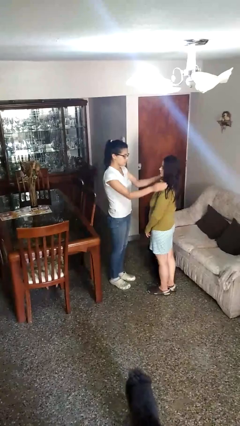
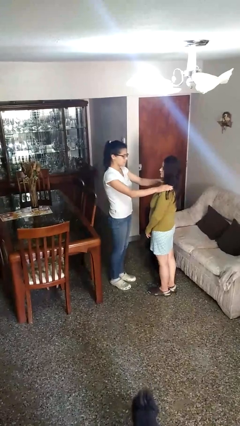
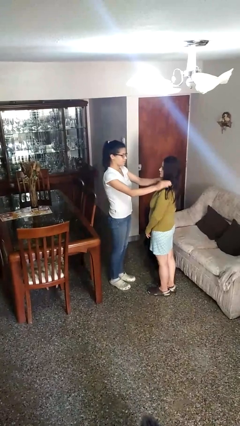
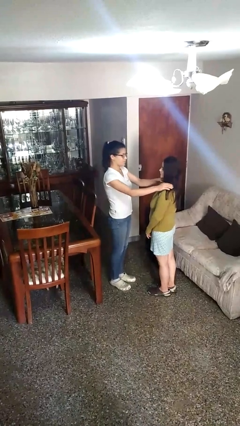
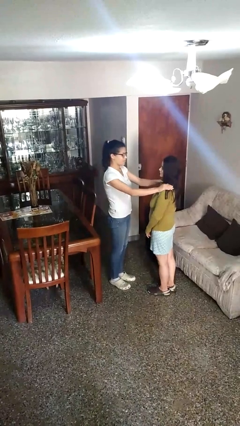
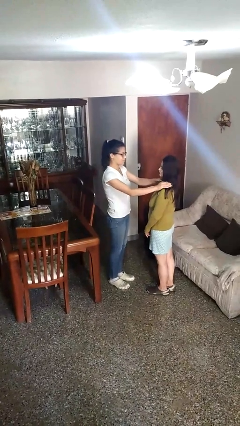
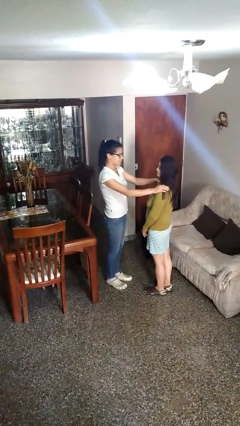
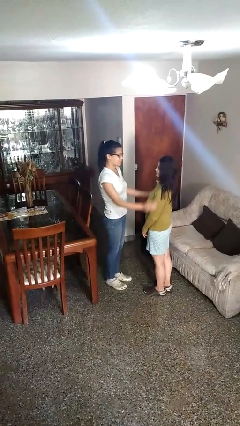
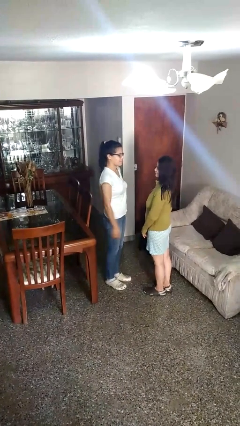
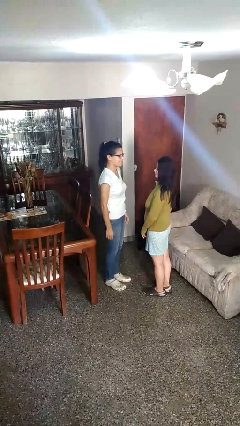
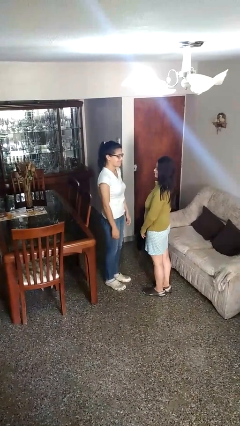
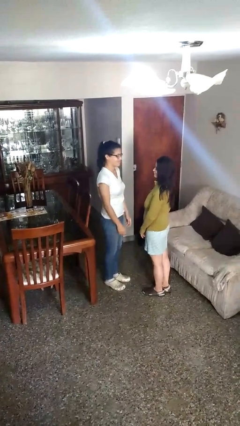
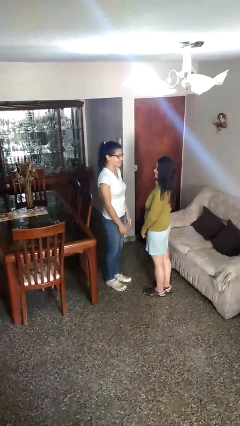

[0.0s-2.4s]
person pounds shoulders of person

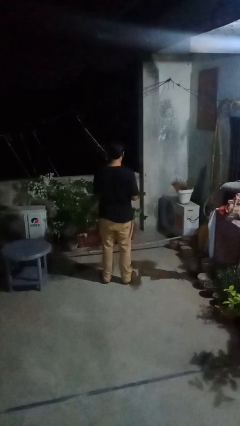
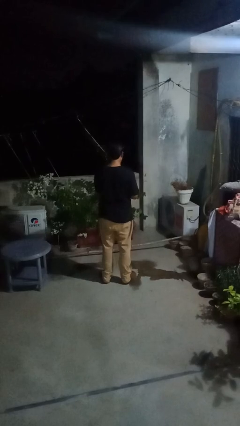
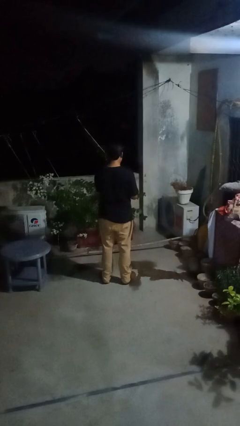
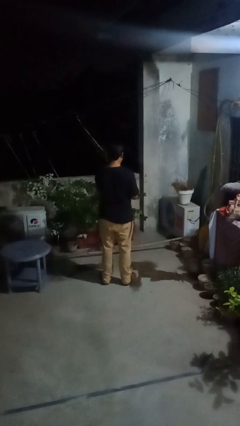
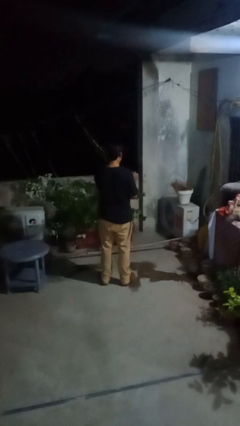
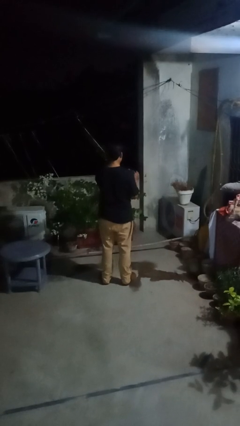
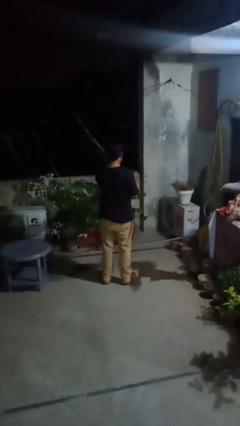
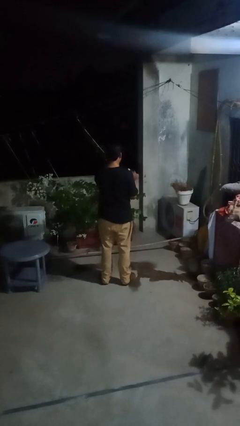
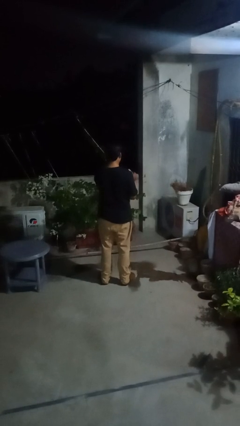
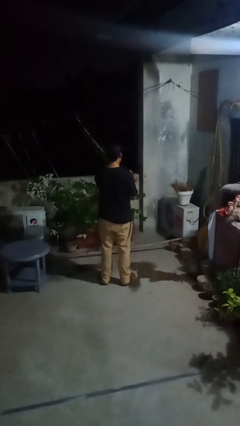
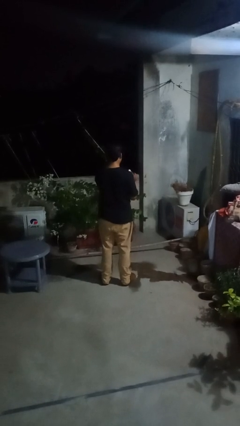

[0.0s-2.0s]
person files fingernails

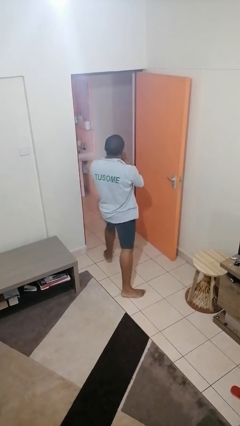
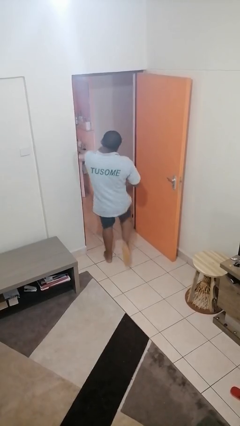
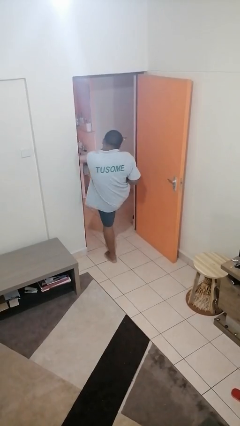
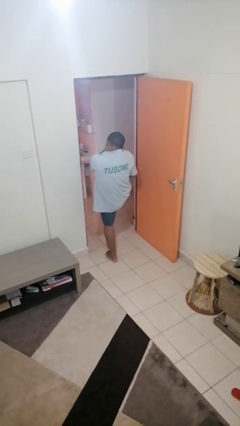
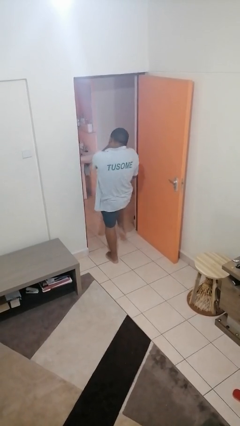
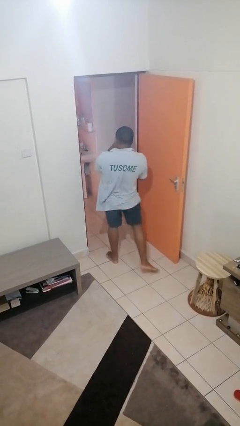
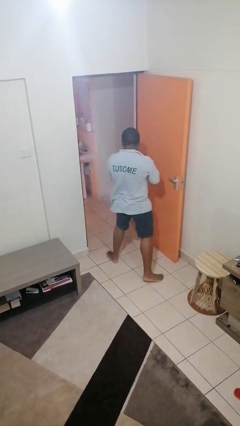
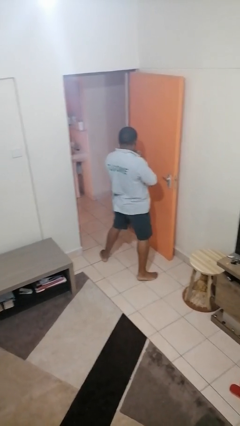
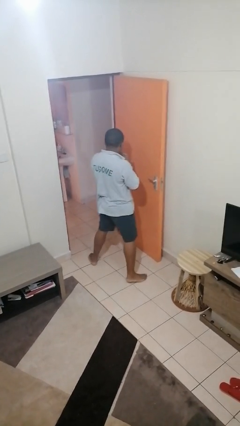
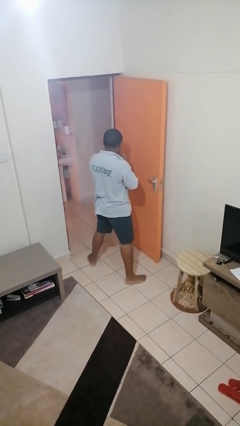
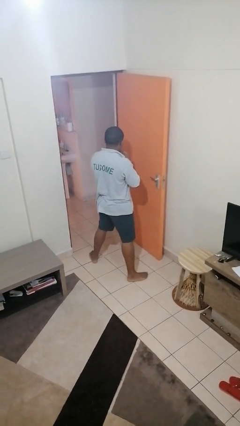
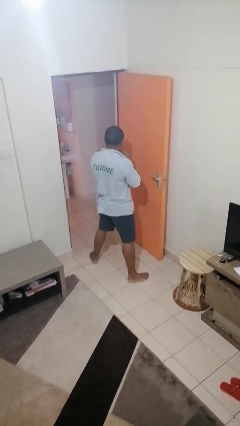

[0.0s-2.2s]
person karate kicks

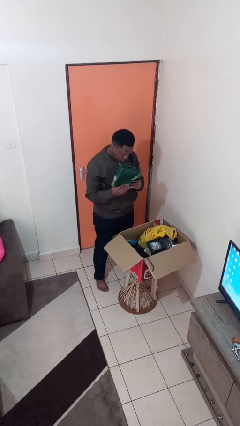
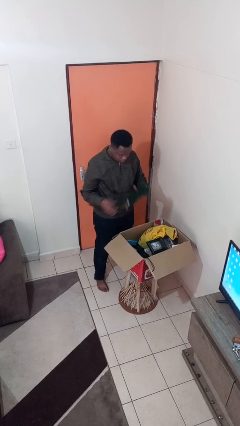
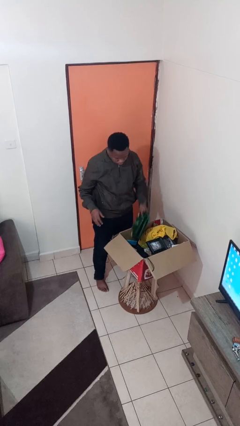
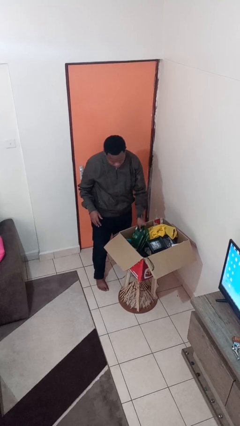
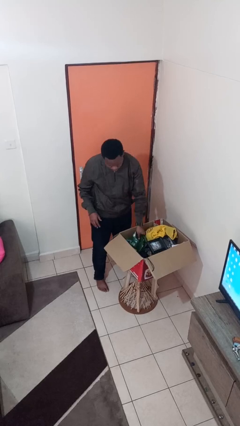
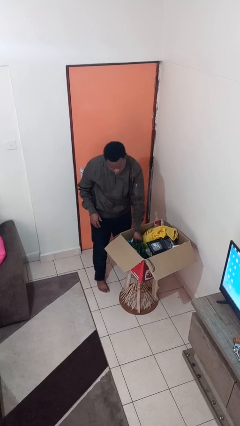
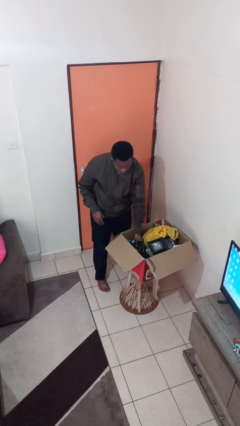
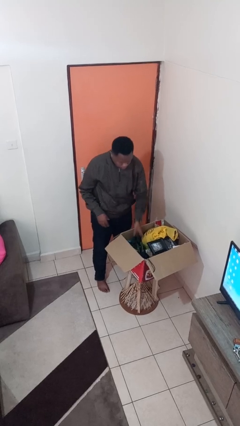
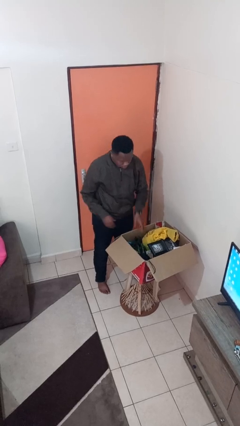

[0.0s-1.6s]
person puts object into box

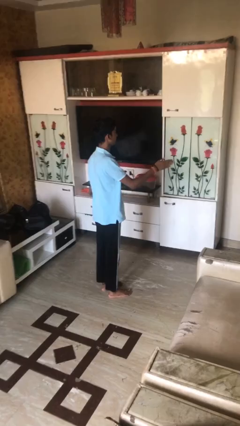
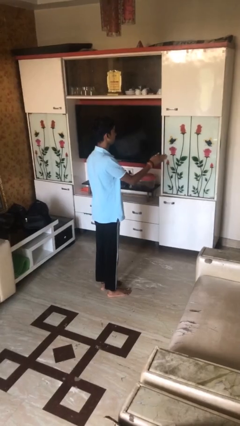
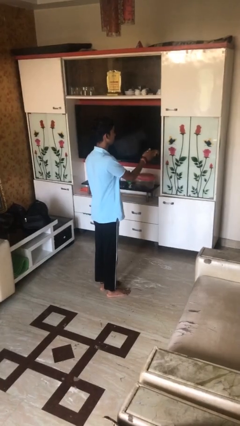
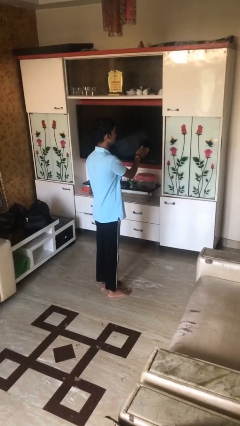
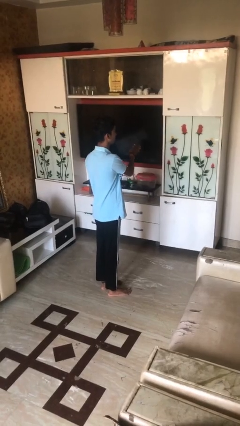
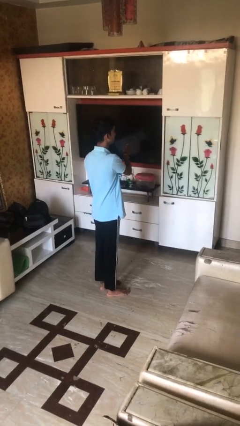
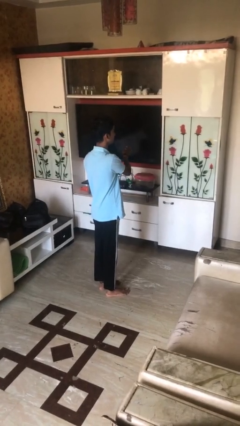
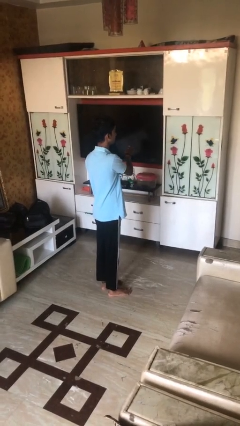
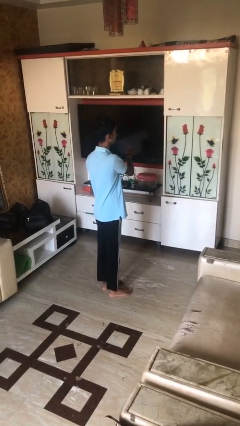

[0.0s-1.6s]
person gestures swipe left

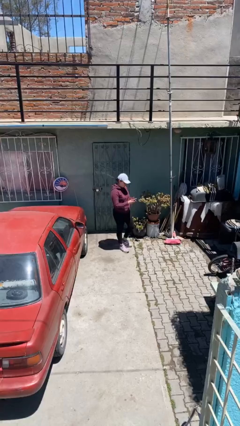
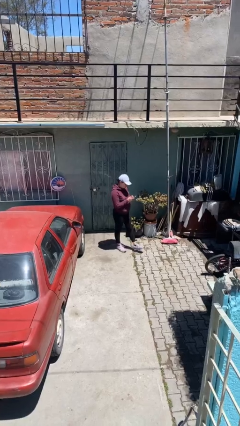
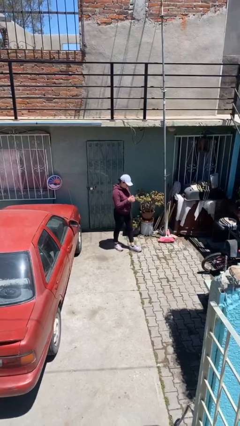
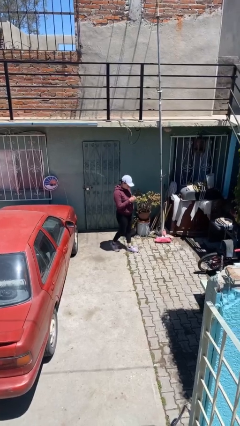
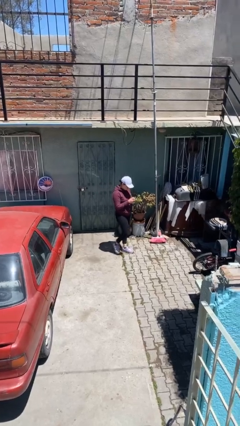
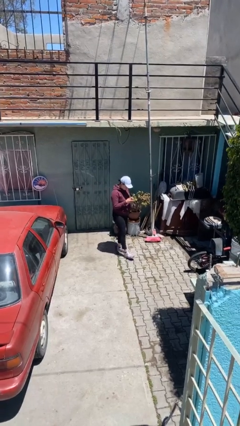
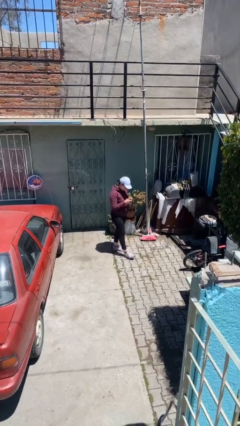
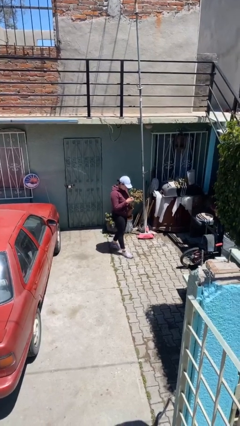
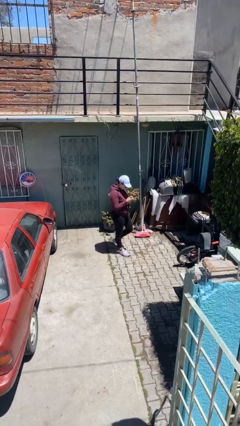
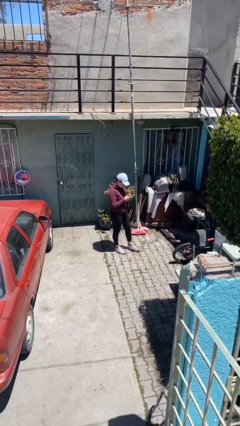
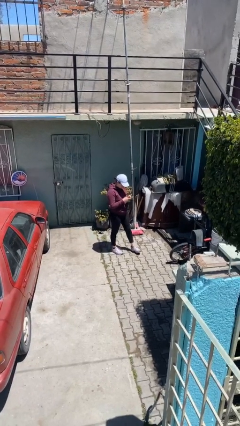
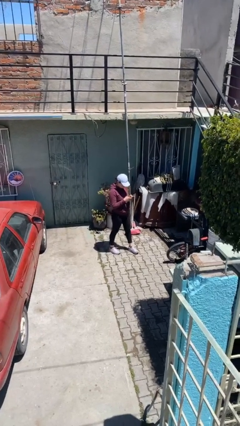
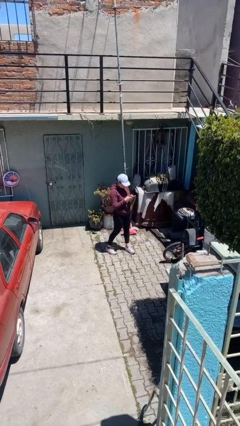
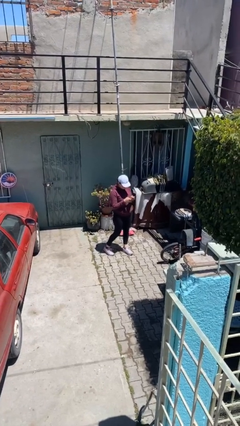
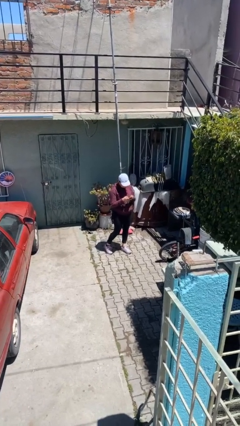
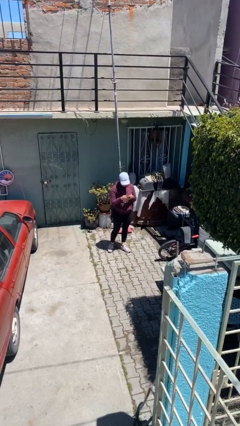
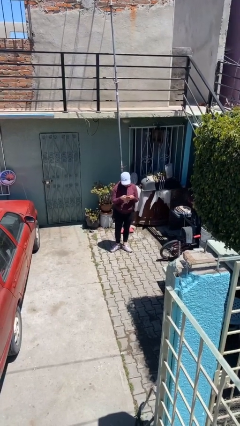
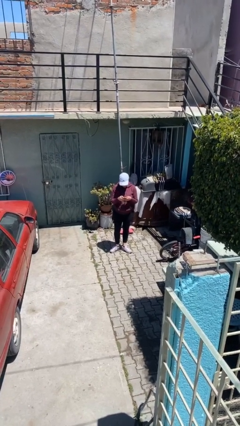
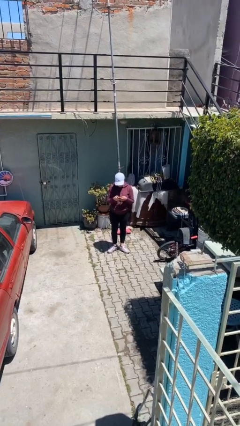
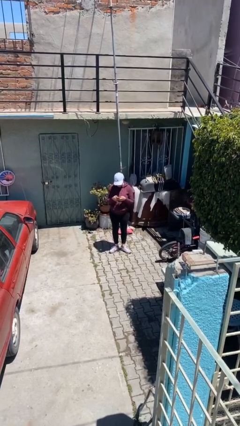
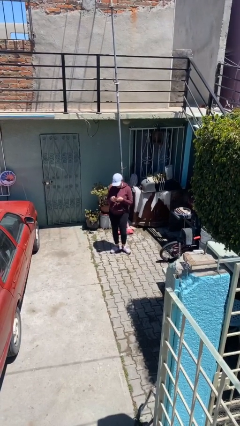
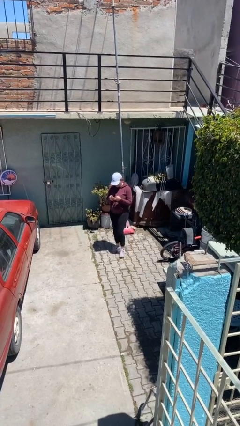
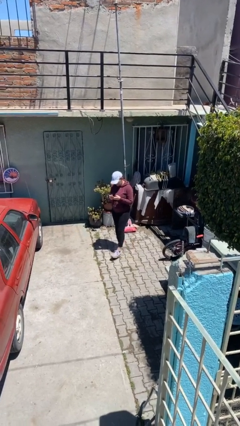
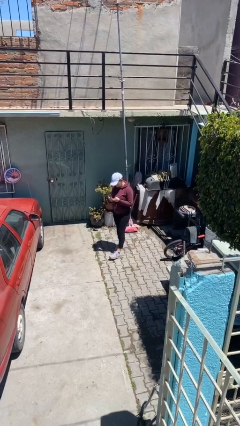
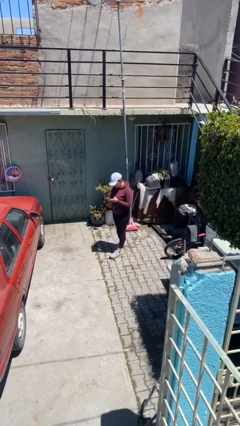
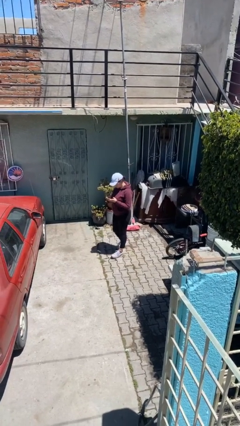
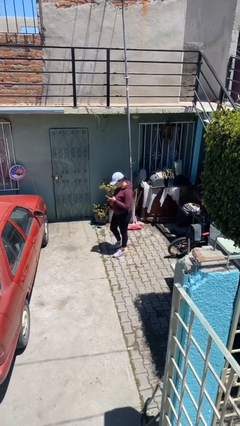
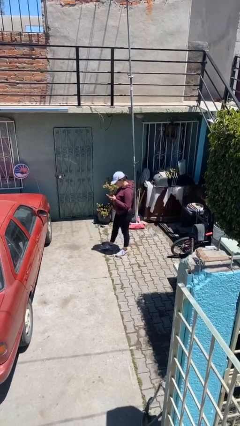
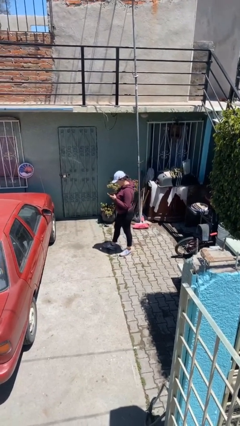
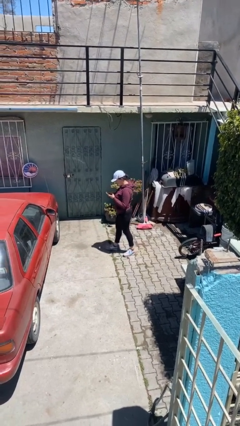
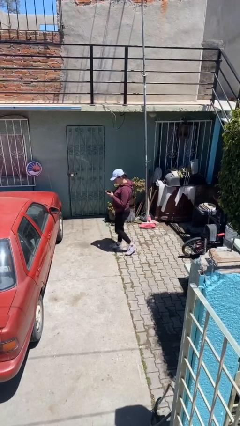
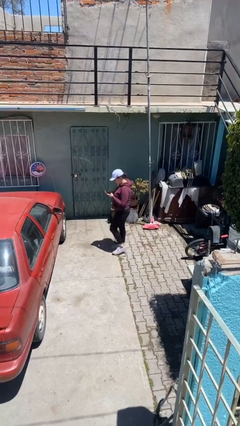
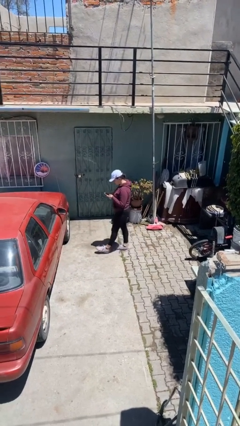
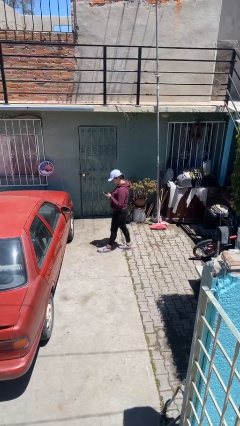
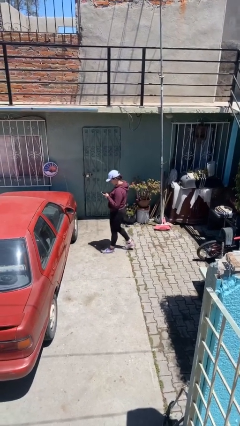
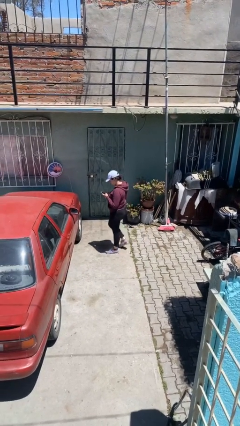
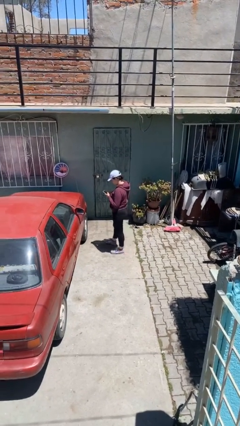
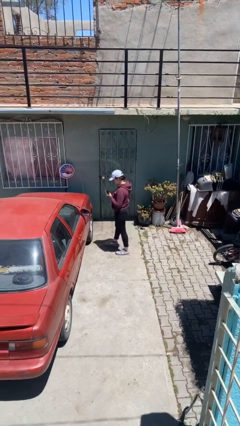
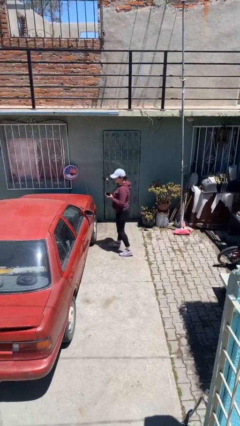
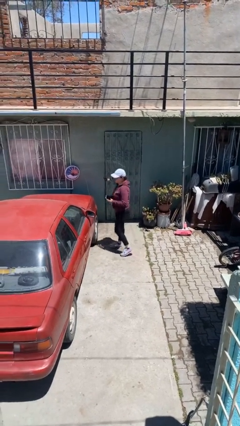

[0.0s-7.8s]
person texts on phone
